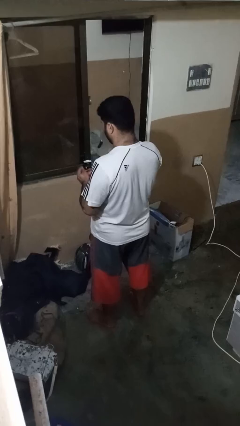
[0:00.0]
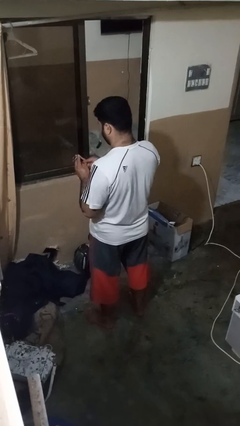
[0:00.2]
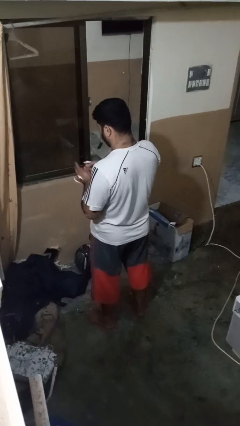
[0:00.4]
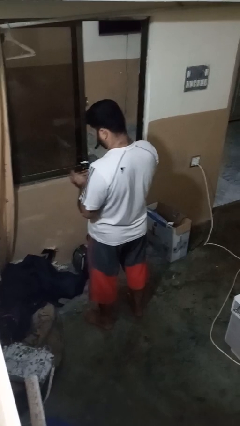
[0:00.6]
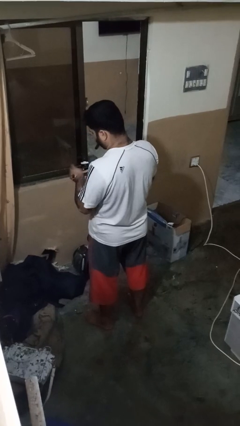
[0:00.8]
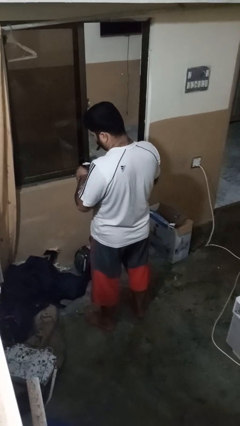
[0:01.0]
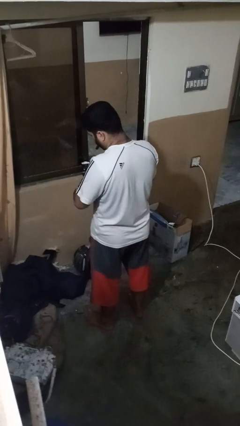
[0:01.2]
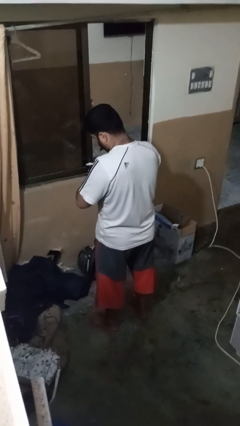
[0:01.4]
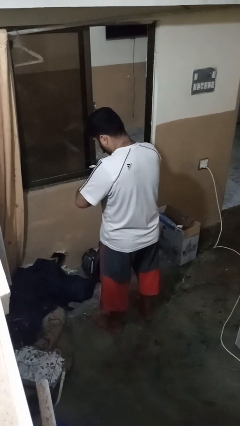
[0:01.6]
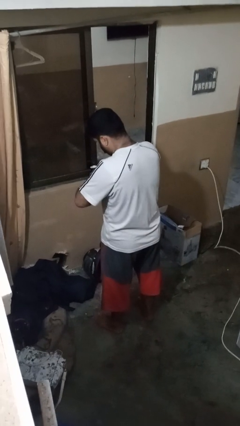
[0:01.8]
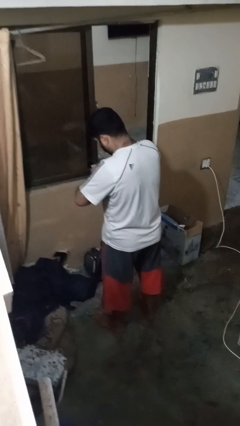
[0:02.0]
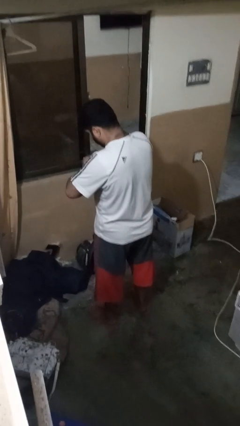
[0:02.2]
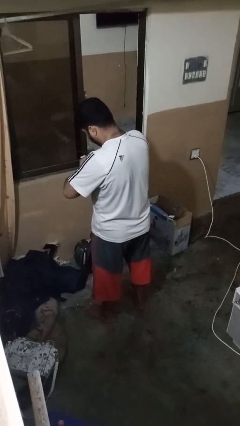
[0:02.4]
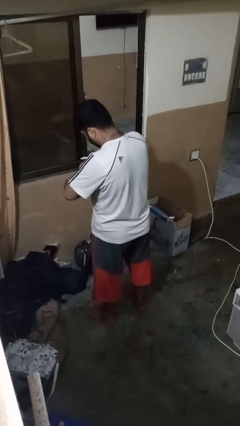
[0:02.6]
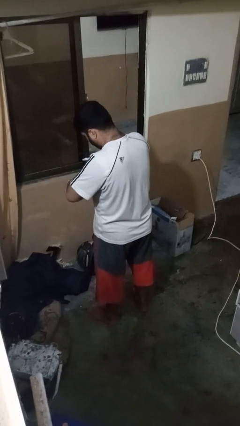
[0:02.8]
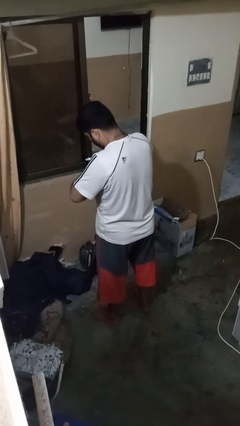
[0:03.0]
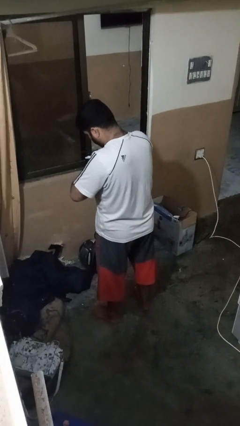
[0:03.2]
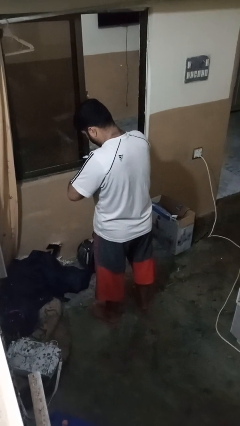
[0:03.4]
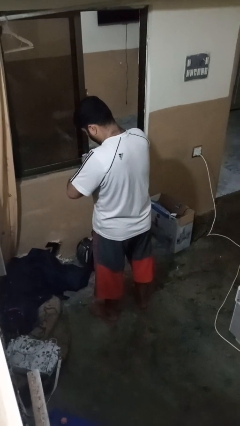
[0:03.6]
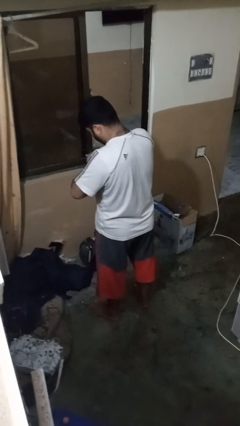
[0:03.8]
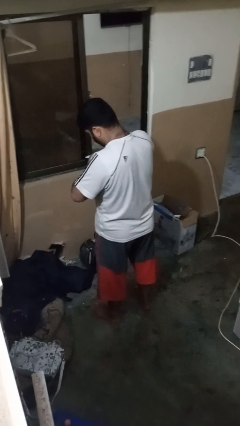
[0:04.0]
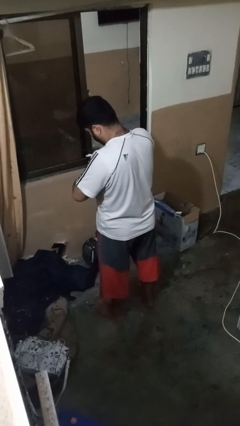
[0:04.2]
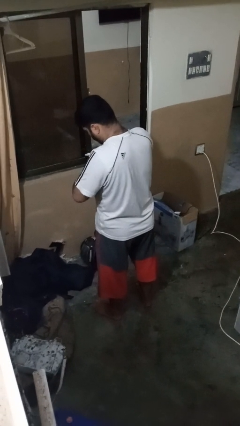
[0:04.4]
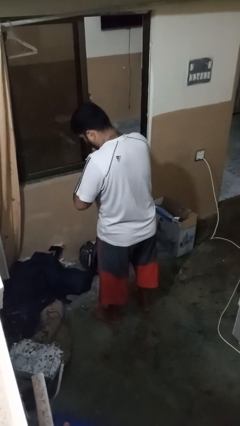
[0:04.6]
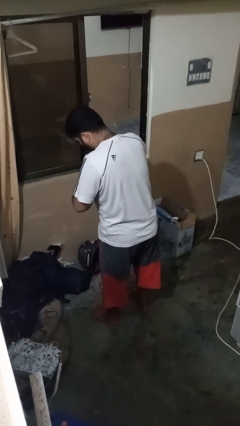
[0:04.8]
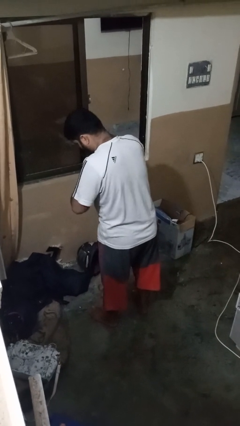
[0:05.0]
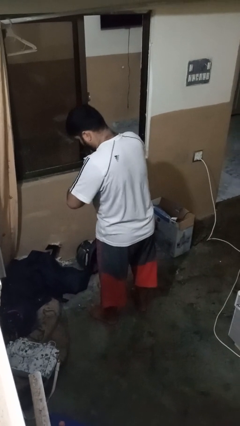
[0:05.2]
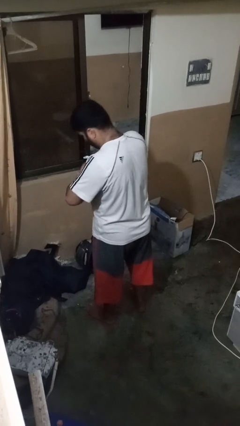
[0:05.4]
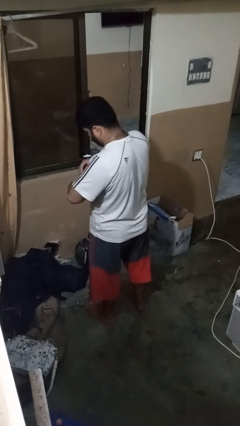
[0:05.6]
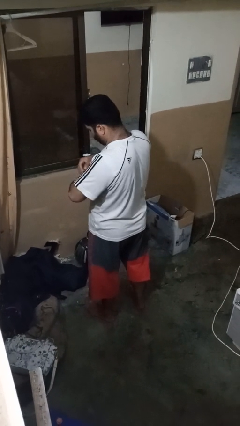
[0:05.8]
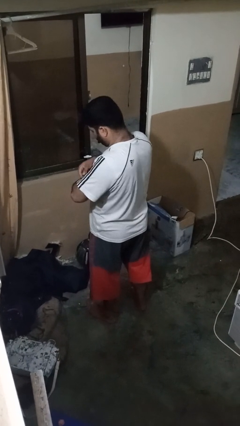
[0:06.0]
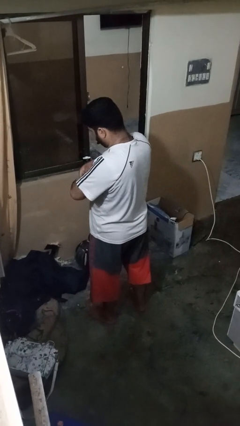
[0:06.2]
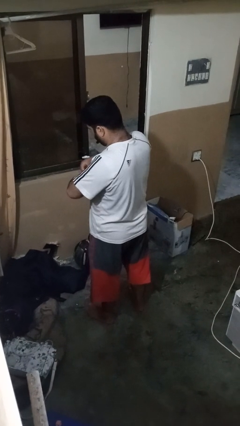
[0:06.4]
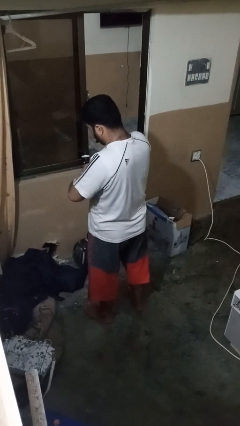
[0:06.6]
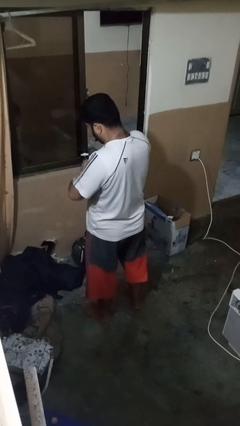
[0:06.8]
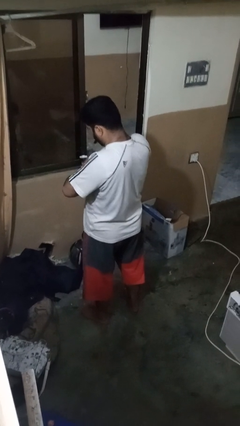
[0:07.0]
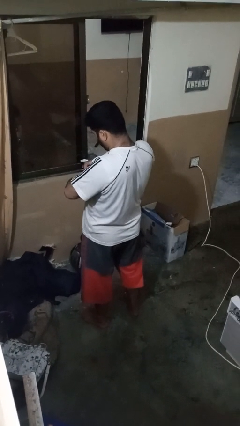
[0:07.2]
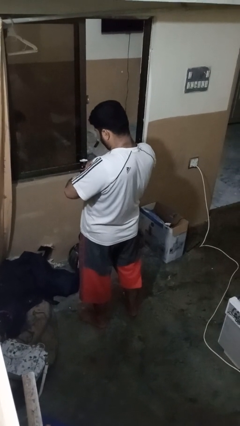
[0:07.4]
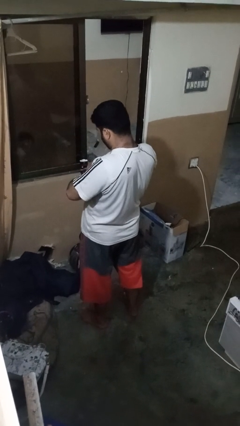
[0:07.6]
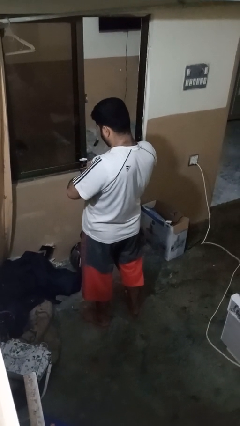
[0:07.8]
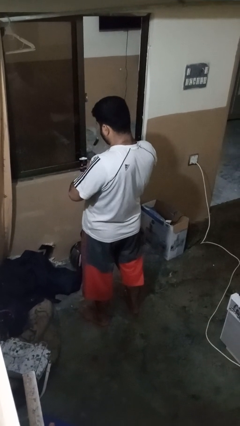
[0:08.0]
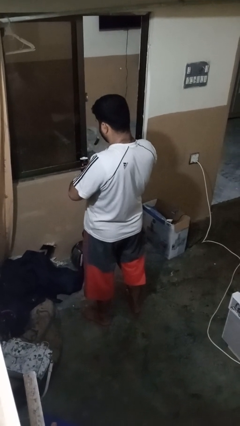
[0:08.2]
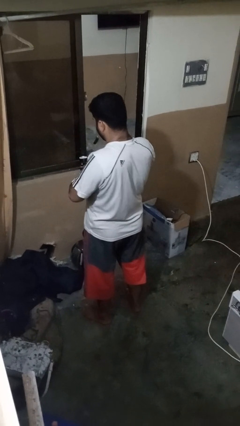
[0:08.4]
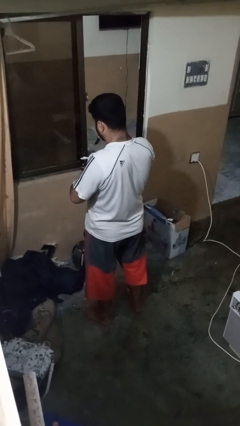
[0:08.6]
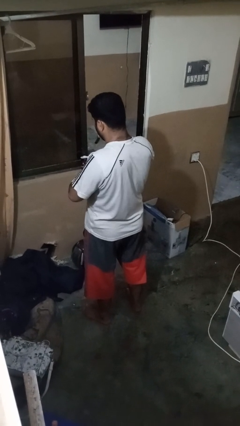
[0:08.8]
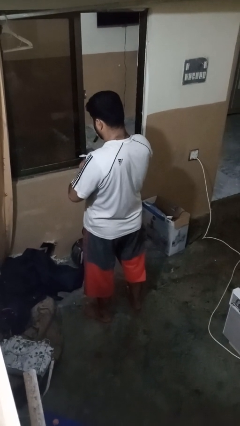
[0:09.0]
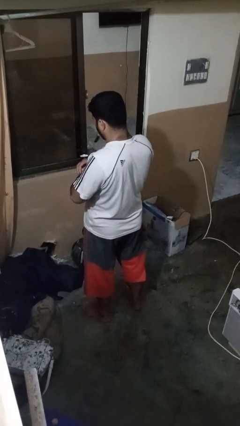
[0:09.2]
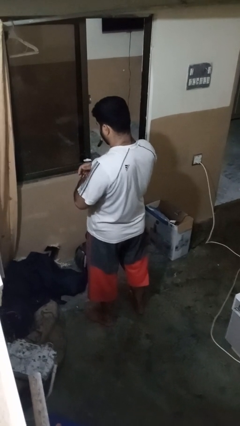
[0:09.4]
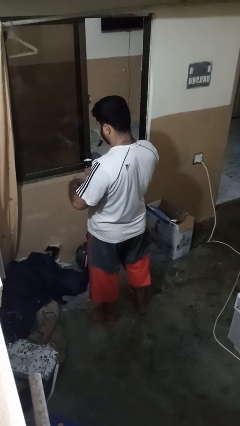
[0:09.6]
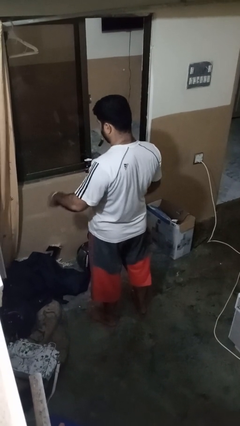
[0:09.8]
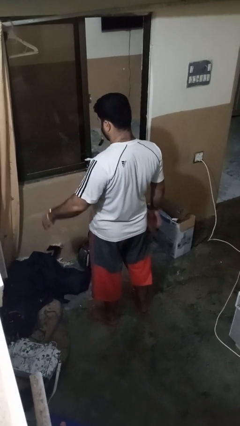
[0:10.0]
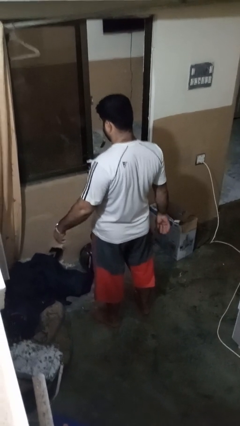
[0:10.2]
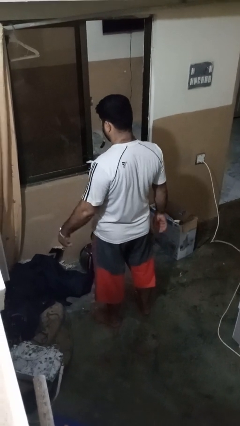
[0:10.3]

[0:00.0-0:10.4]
person puts on wristwatch

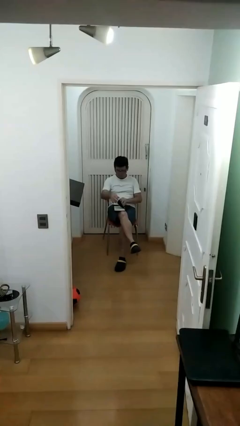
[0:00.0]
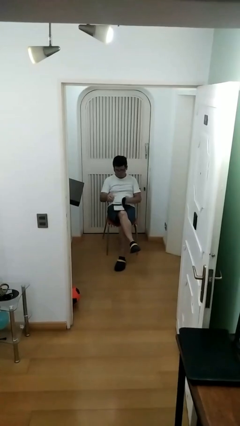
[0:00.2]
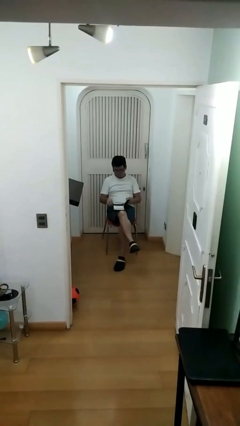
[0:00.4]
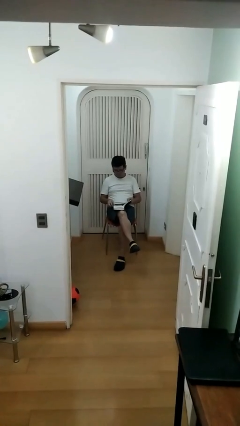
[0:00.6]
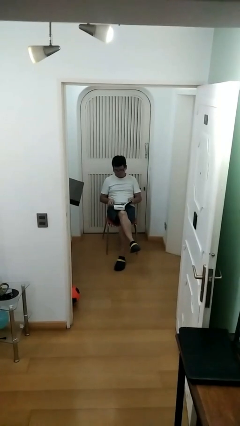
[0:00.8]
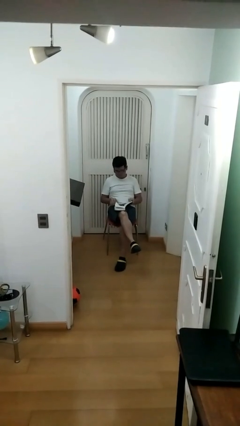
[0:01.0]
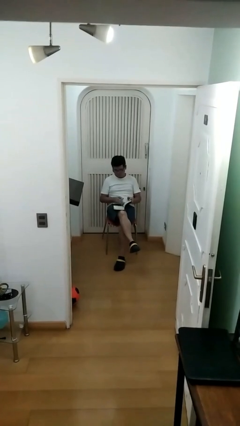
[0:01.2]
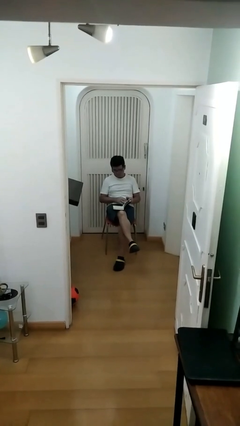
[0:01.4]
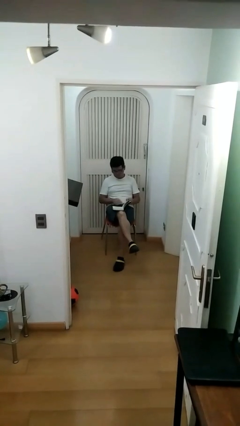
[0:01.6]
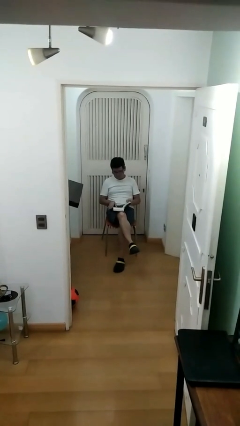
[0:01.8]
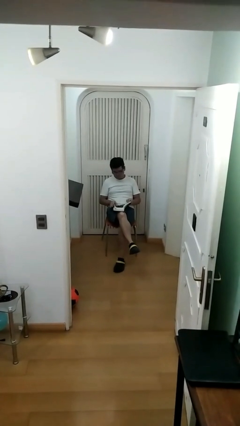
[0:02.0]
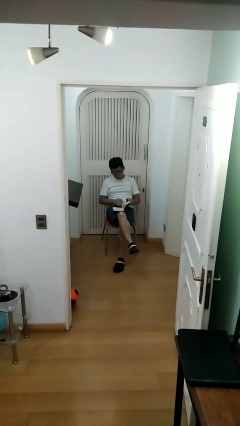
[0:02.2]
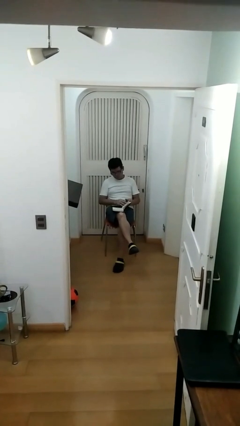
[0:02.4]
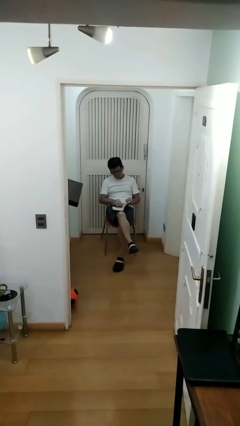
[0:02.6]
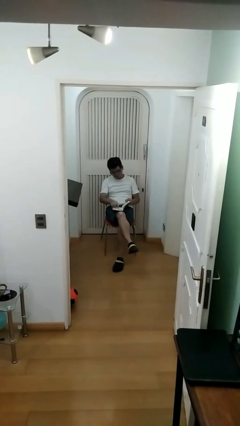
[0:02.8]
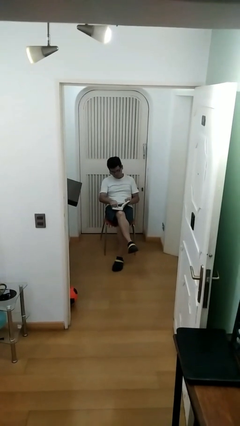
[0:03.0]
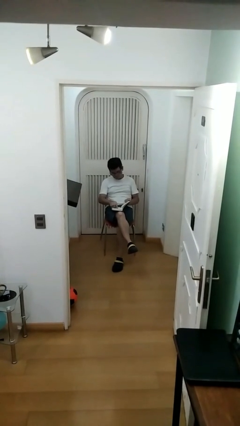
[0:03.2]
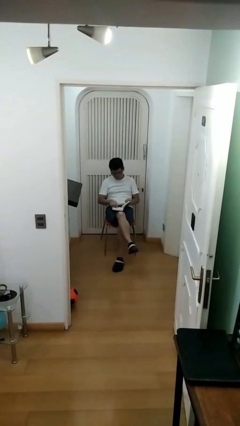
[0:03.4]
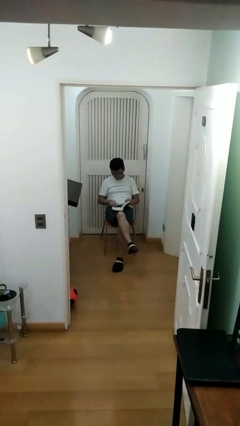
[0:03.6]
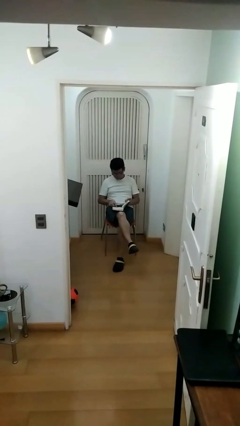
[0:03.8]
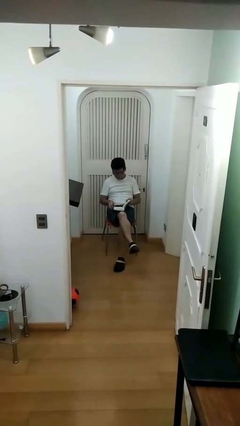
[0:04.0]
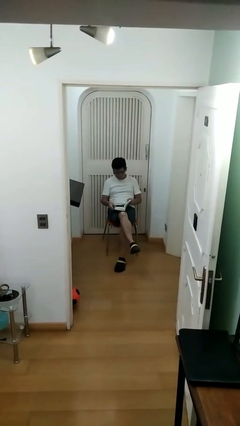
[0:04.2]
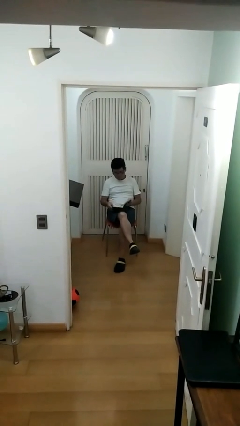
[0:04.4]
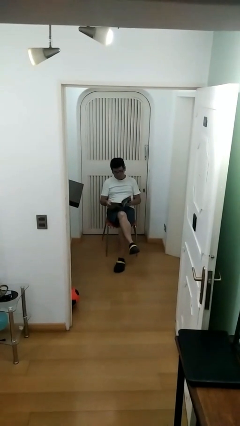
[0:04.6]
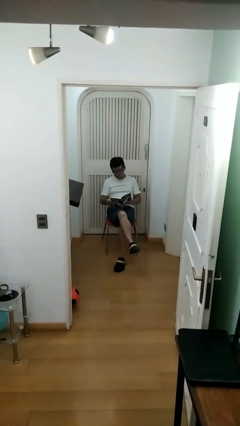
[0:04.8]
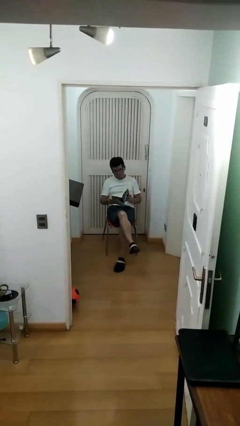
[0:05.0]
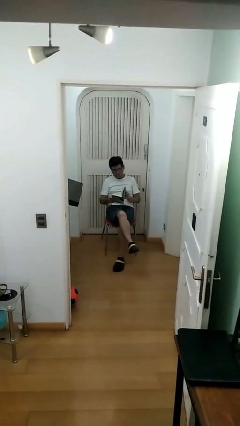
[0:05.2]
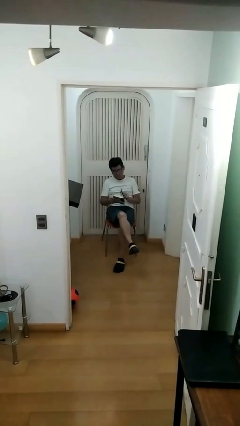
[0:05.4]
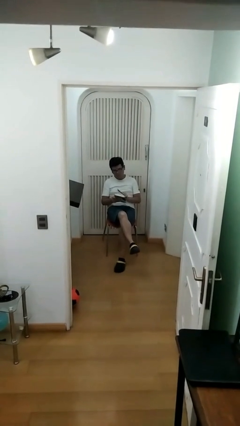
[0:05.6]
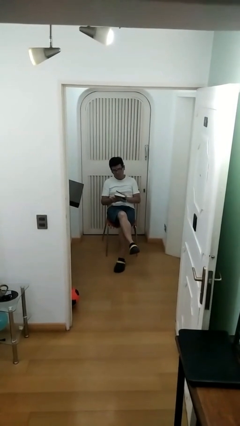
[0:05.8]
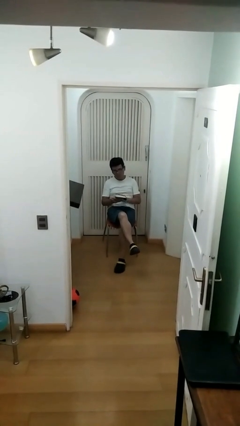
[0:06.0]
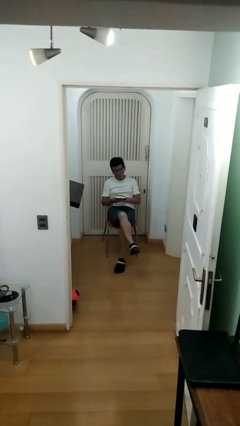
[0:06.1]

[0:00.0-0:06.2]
person reads document

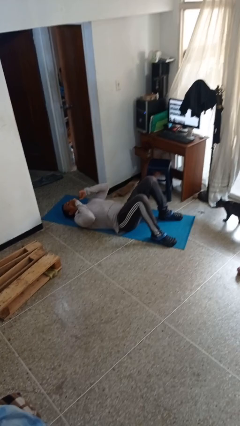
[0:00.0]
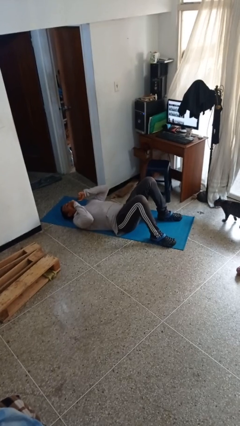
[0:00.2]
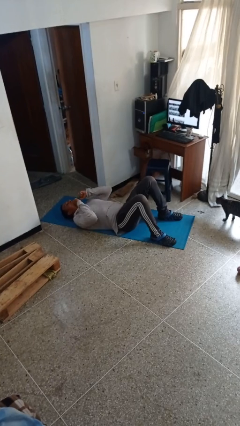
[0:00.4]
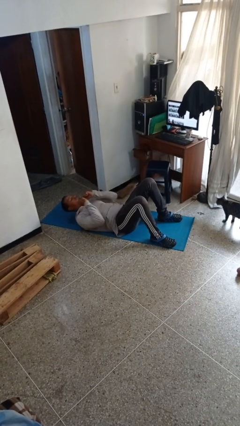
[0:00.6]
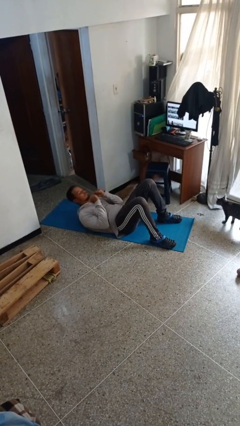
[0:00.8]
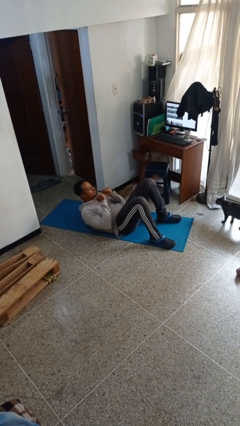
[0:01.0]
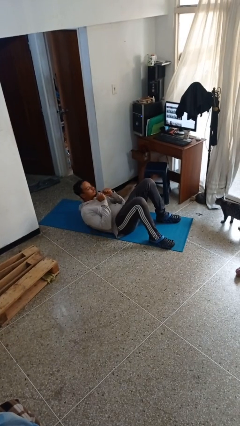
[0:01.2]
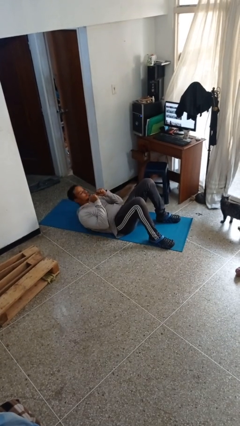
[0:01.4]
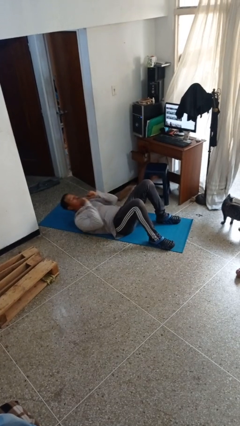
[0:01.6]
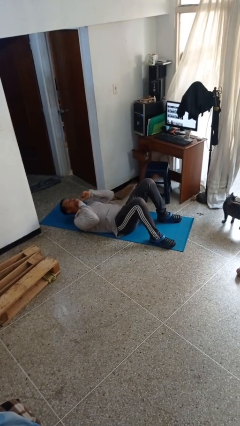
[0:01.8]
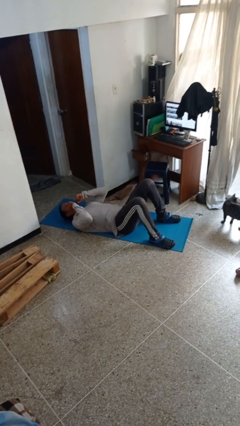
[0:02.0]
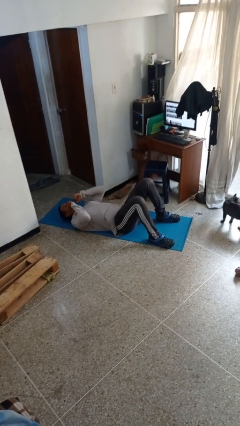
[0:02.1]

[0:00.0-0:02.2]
person exercises with situp
